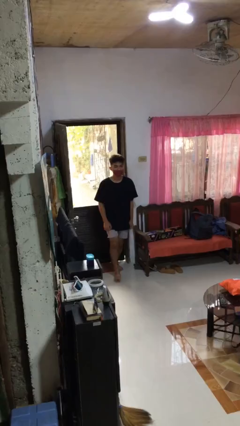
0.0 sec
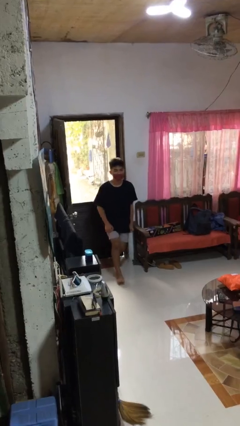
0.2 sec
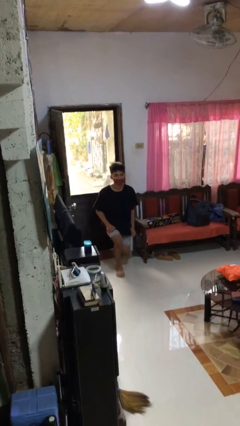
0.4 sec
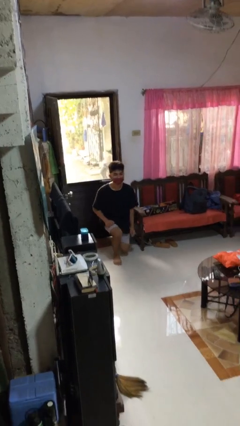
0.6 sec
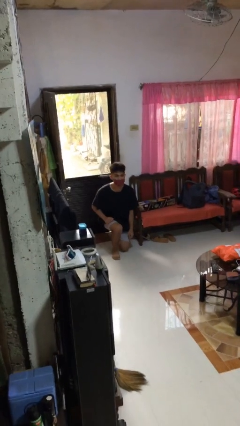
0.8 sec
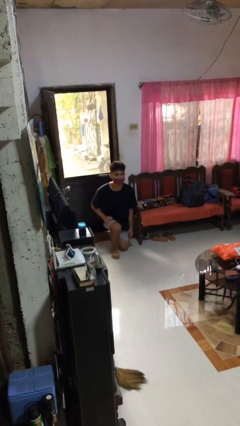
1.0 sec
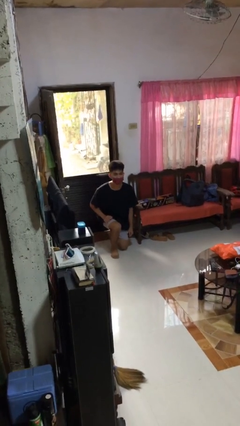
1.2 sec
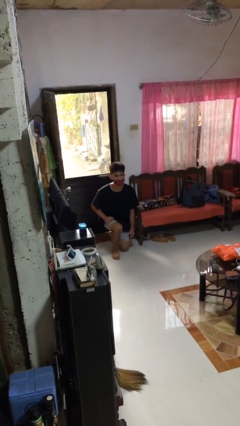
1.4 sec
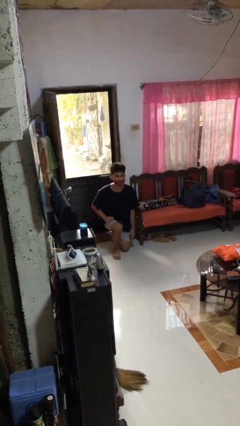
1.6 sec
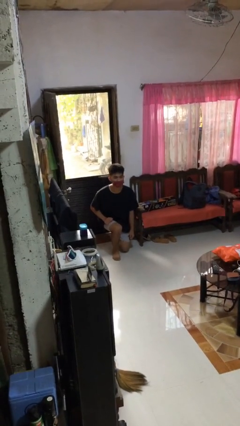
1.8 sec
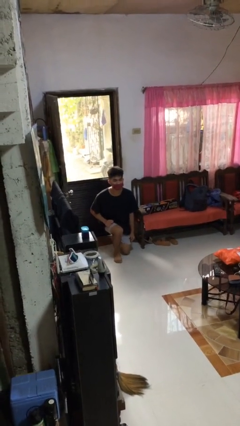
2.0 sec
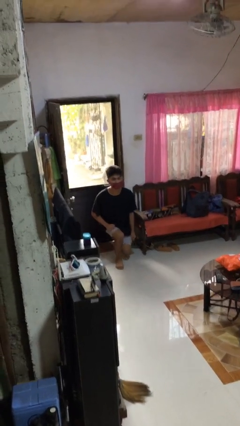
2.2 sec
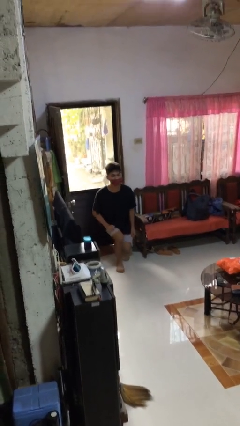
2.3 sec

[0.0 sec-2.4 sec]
person kneels

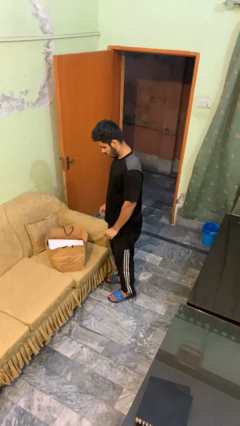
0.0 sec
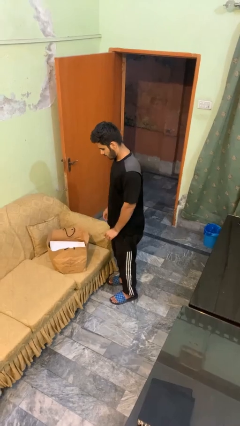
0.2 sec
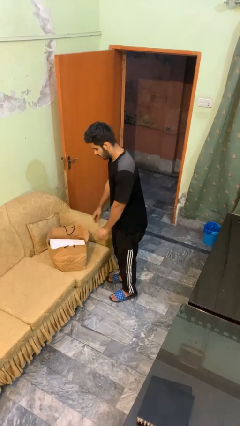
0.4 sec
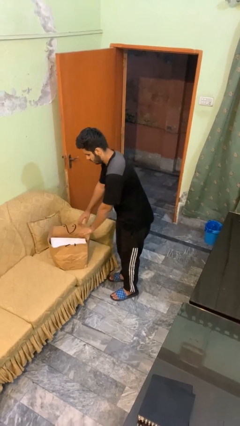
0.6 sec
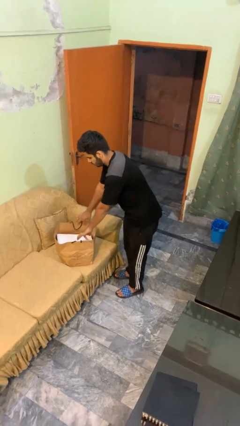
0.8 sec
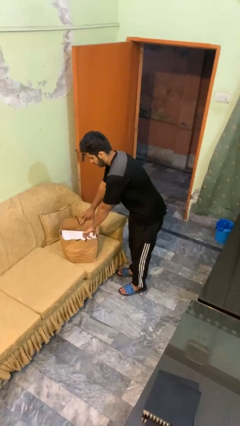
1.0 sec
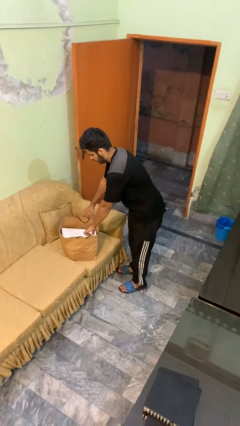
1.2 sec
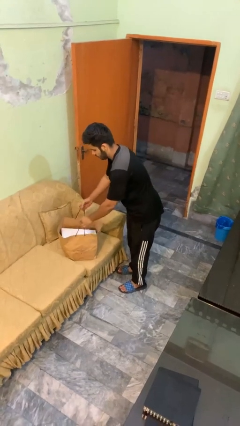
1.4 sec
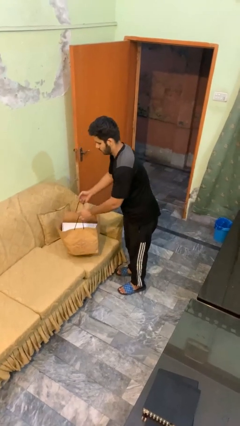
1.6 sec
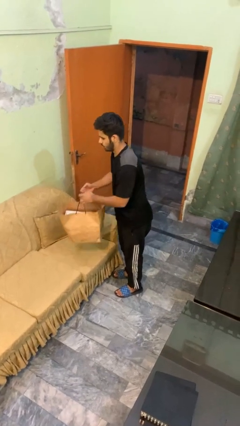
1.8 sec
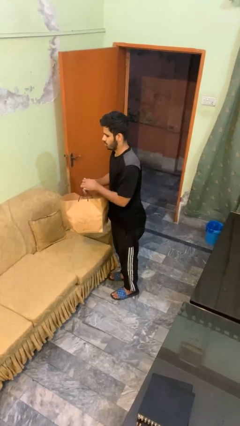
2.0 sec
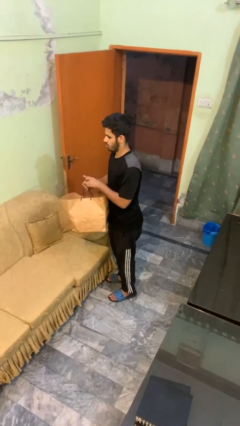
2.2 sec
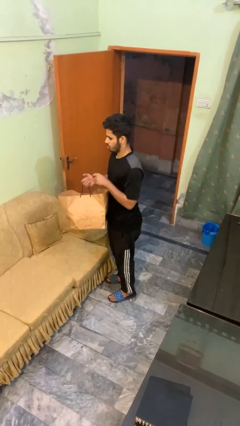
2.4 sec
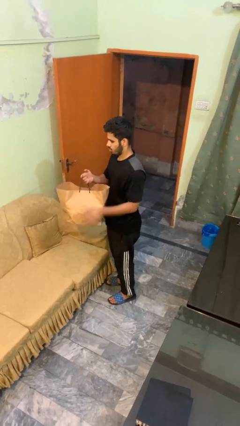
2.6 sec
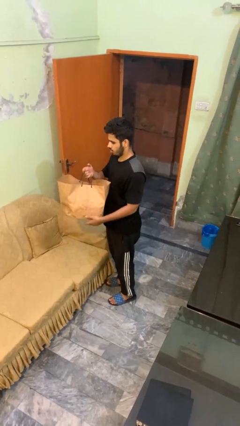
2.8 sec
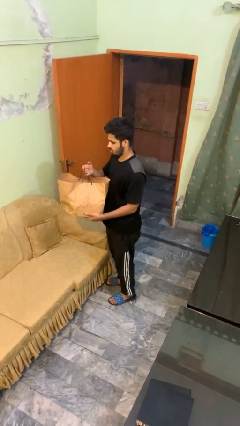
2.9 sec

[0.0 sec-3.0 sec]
person picks up object from couch

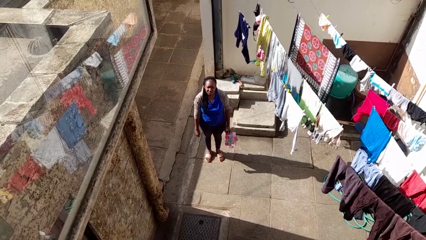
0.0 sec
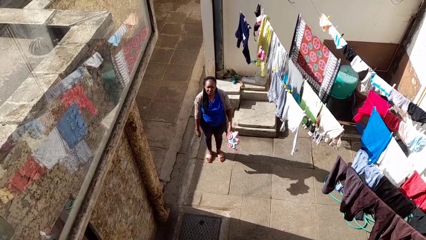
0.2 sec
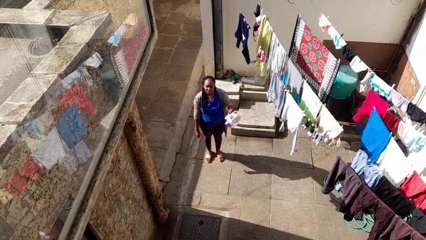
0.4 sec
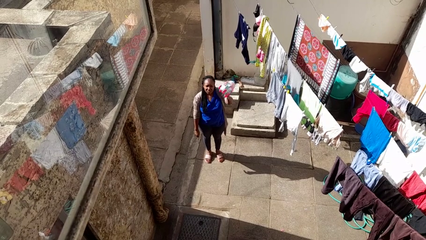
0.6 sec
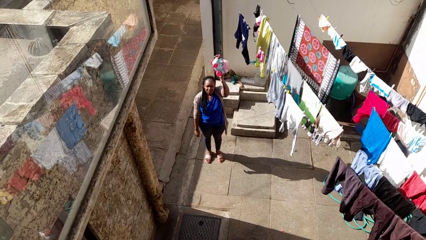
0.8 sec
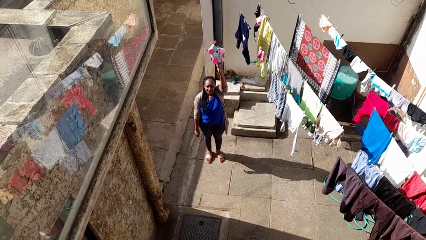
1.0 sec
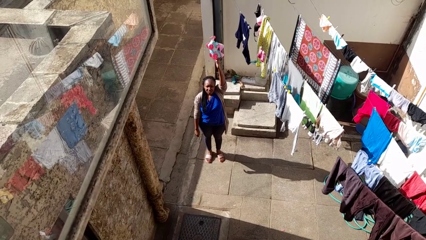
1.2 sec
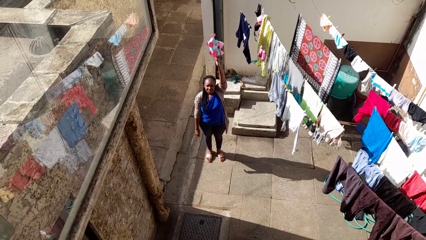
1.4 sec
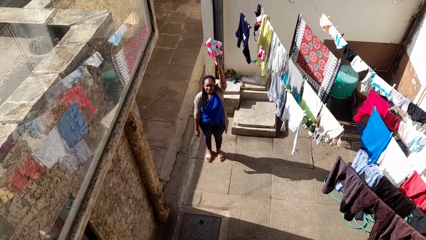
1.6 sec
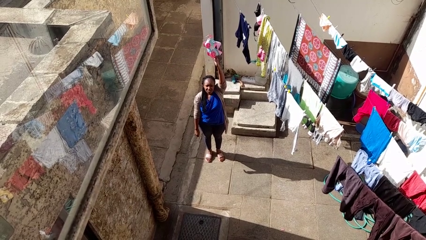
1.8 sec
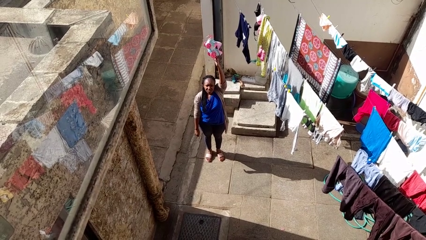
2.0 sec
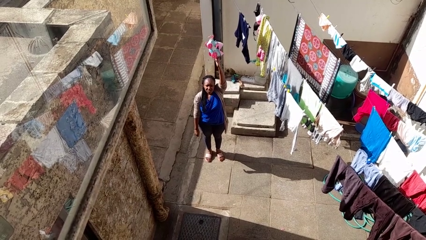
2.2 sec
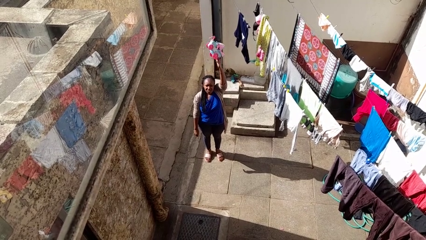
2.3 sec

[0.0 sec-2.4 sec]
person holds object above head

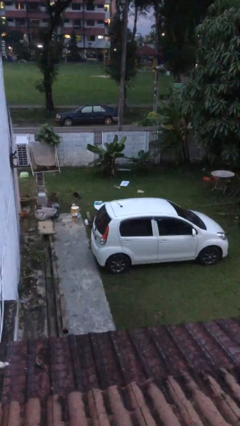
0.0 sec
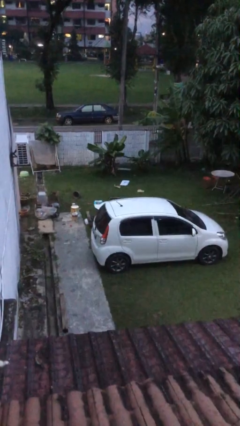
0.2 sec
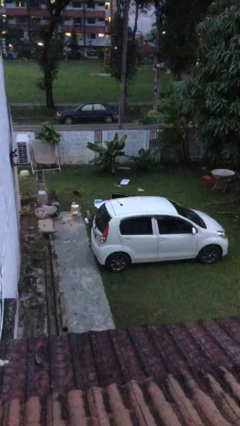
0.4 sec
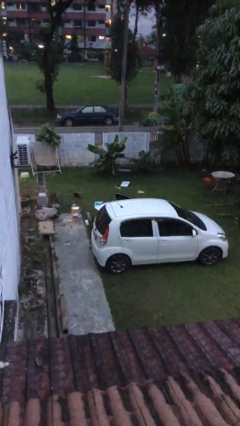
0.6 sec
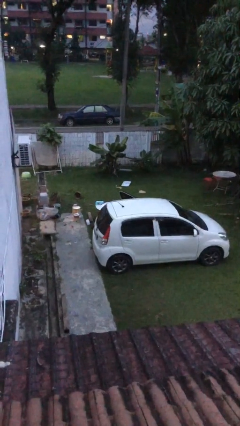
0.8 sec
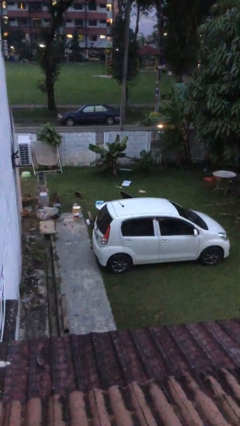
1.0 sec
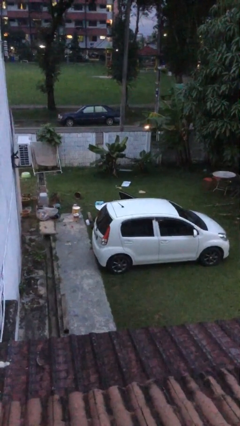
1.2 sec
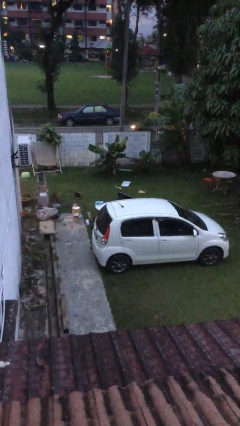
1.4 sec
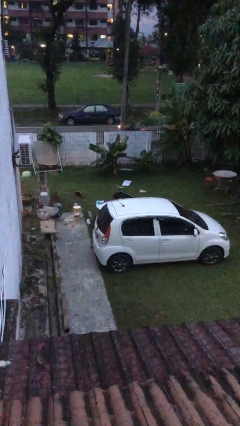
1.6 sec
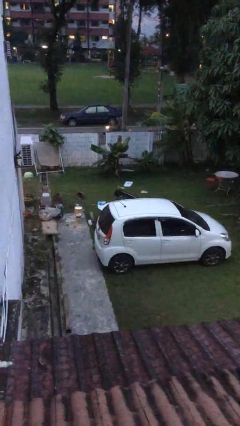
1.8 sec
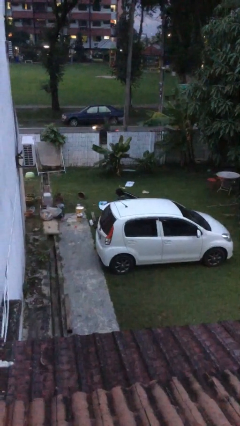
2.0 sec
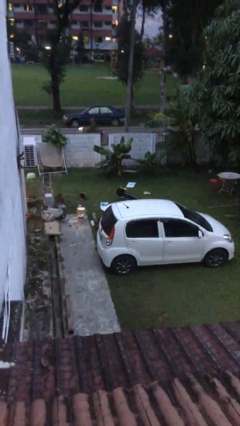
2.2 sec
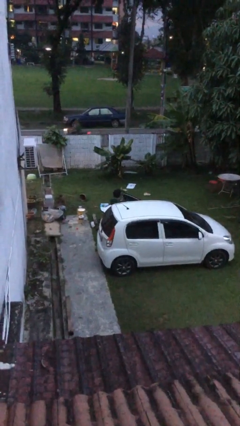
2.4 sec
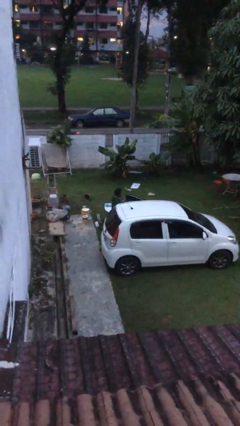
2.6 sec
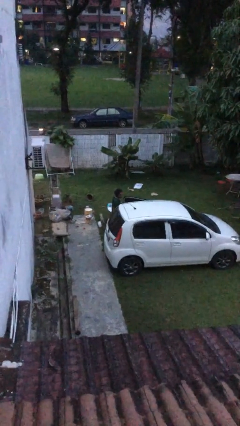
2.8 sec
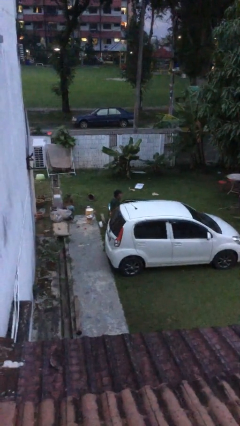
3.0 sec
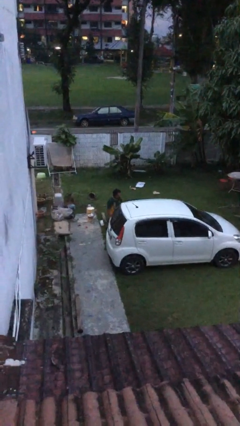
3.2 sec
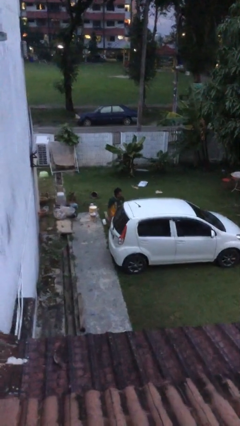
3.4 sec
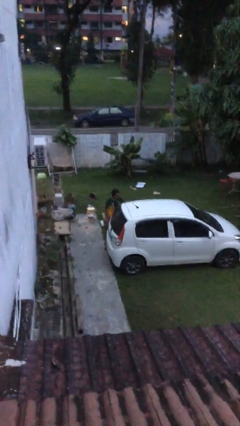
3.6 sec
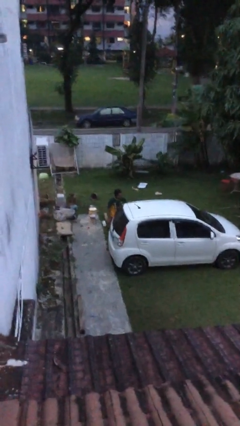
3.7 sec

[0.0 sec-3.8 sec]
car drops off person

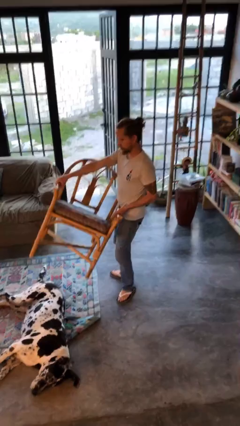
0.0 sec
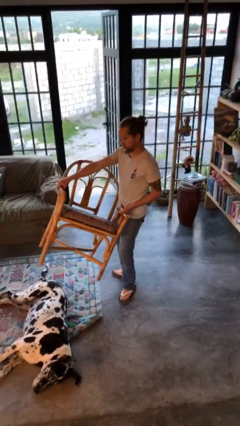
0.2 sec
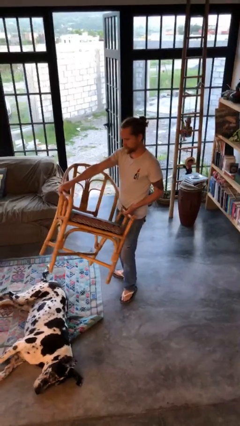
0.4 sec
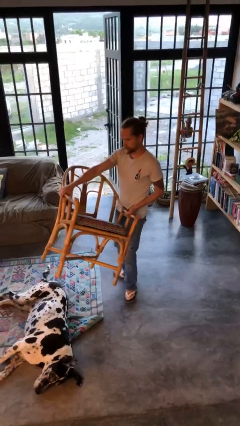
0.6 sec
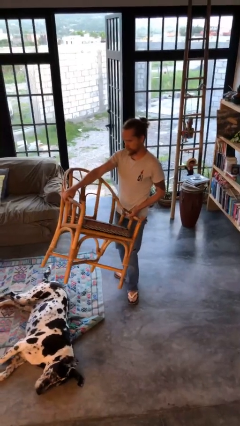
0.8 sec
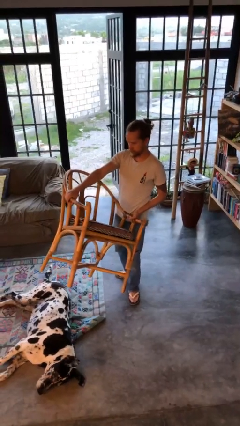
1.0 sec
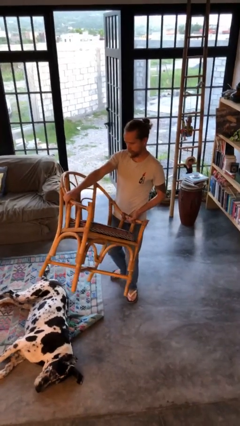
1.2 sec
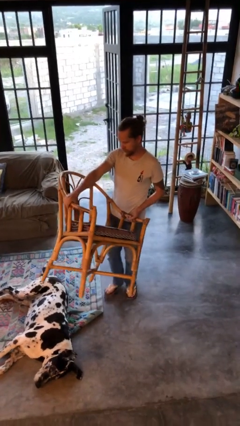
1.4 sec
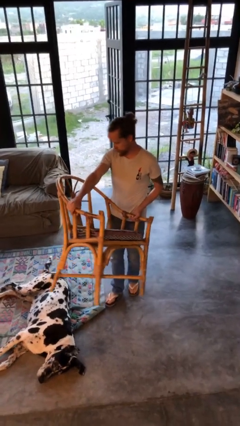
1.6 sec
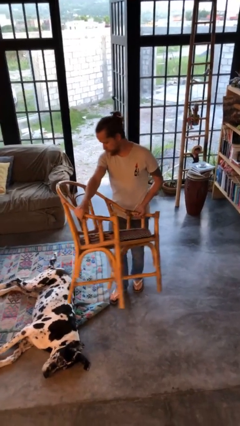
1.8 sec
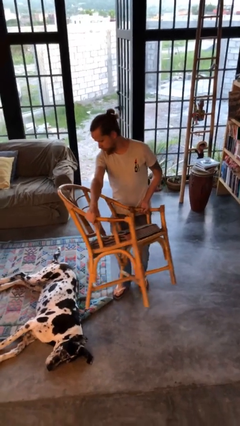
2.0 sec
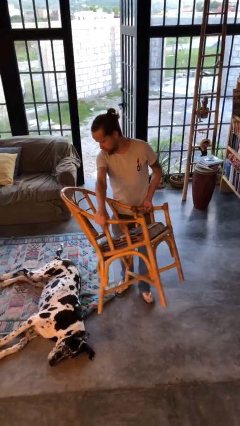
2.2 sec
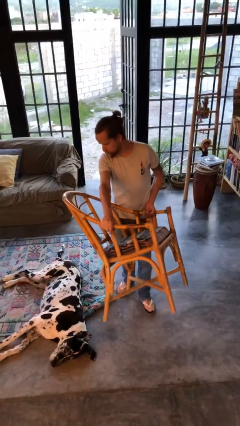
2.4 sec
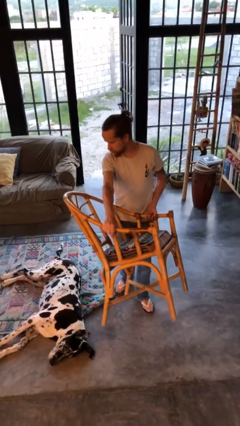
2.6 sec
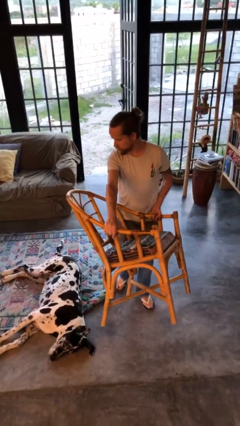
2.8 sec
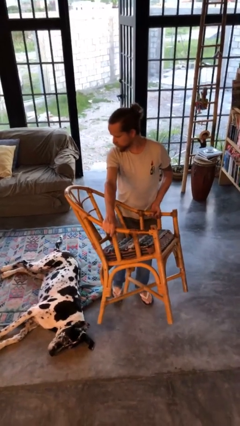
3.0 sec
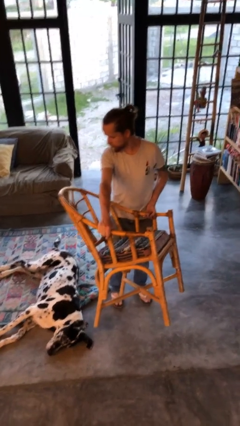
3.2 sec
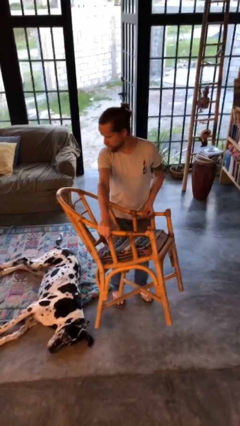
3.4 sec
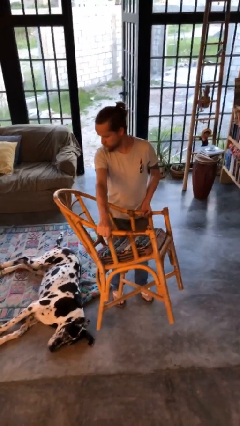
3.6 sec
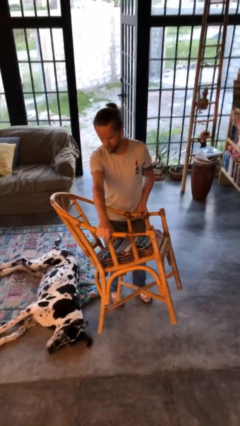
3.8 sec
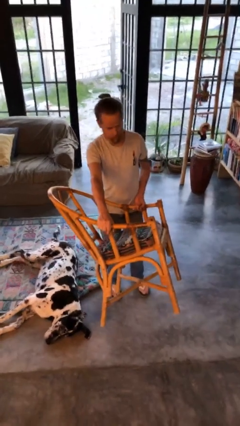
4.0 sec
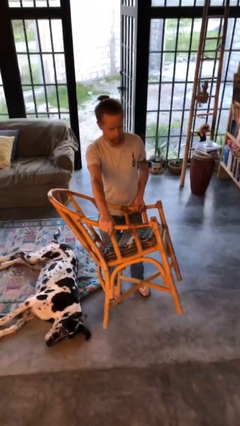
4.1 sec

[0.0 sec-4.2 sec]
person carries furniture

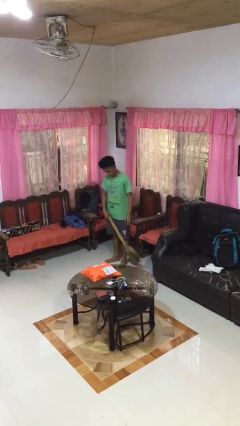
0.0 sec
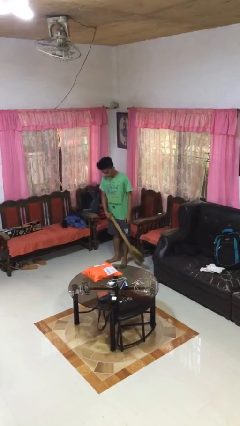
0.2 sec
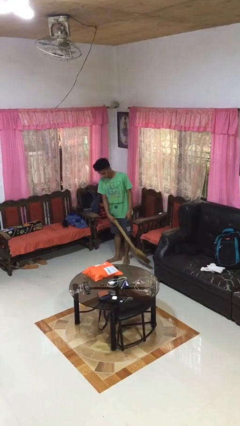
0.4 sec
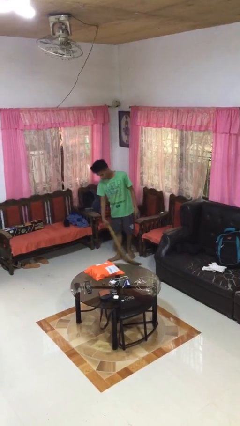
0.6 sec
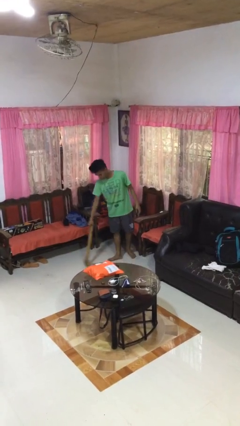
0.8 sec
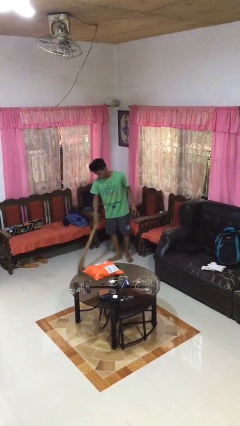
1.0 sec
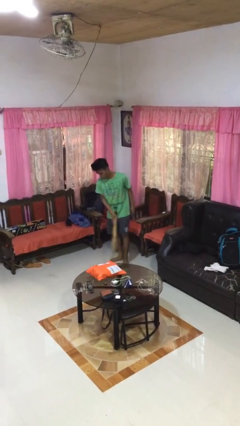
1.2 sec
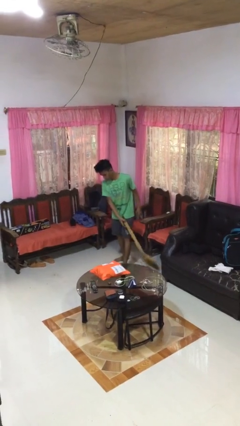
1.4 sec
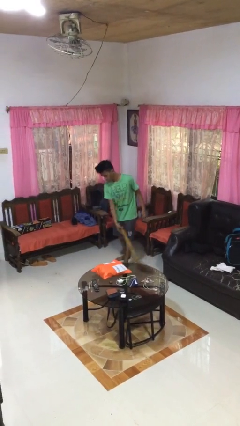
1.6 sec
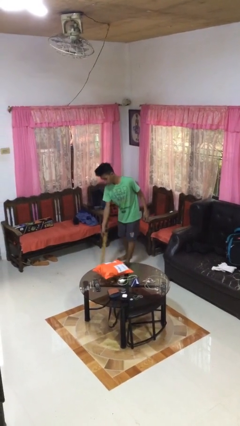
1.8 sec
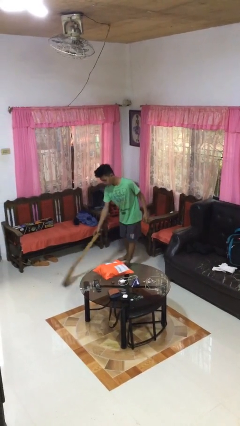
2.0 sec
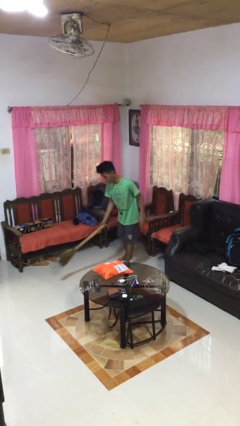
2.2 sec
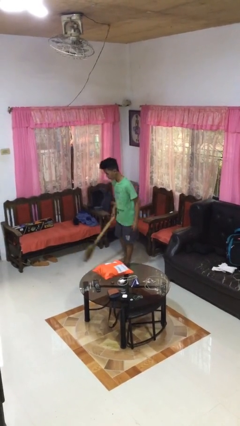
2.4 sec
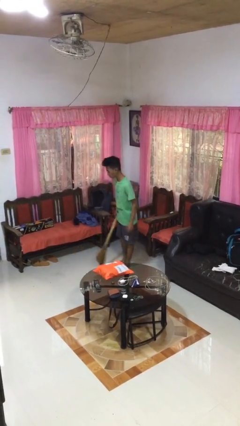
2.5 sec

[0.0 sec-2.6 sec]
person sweeps floor
